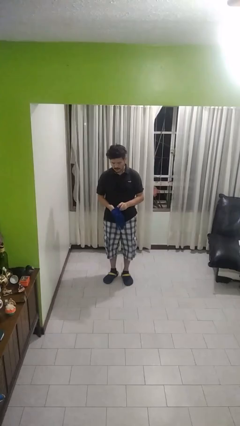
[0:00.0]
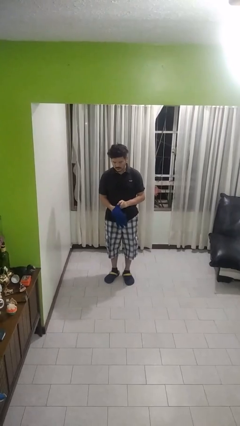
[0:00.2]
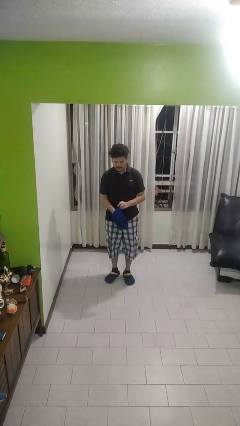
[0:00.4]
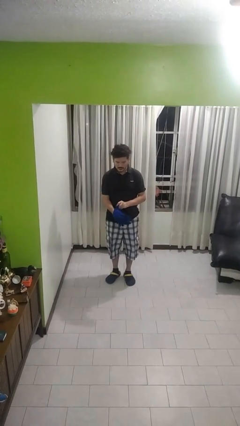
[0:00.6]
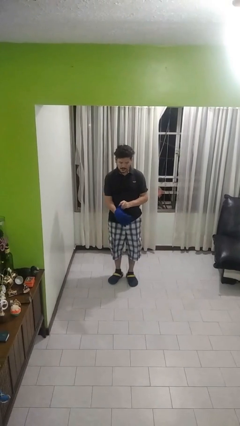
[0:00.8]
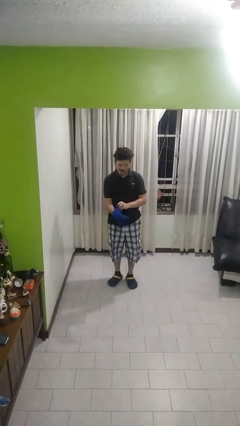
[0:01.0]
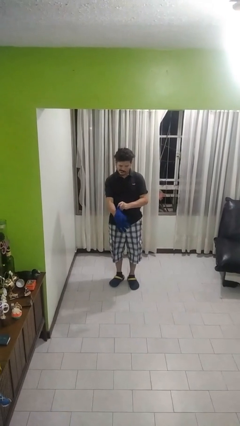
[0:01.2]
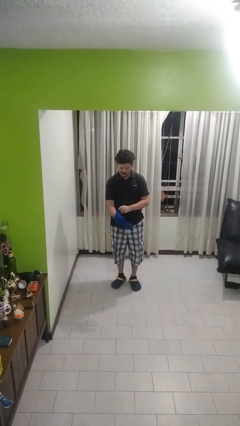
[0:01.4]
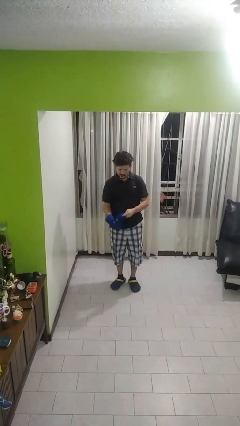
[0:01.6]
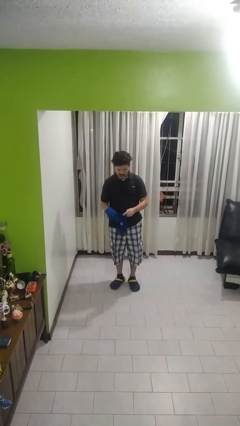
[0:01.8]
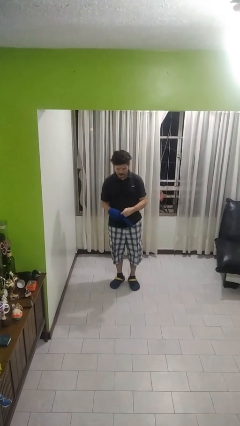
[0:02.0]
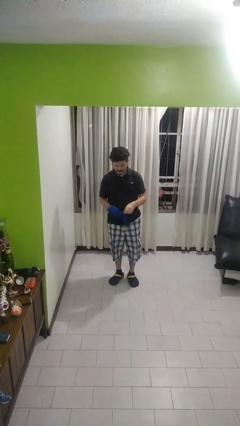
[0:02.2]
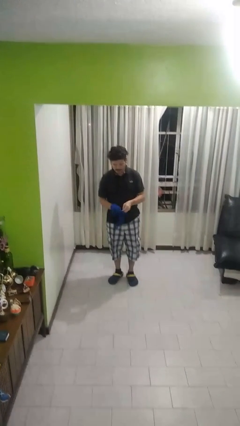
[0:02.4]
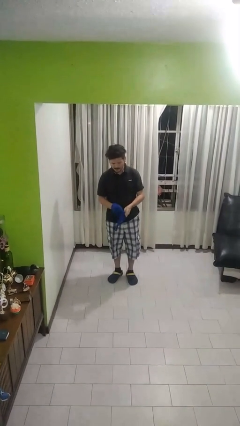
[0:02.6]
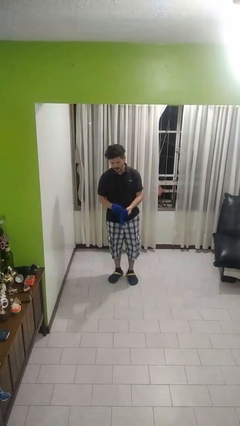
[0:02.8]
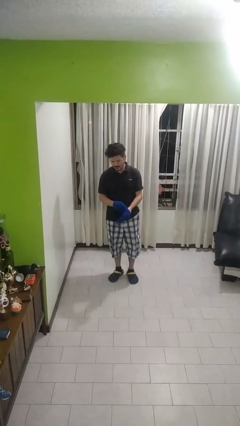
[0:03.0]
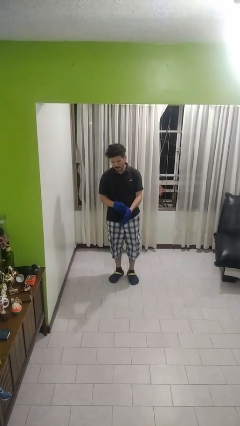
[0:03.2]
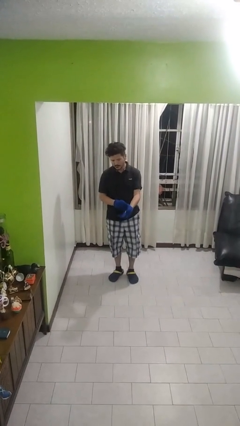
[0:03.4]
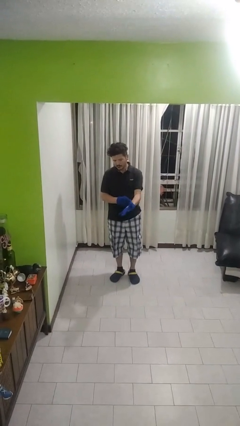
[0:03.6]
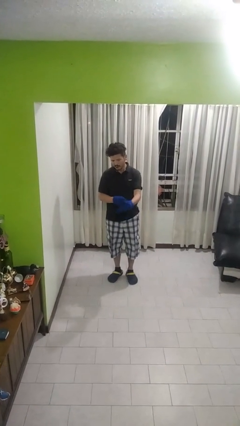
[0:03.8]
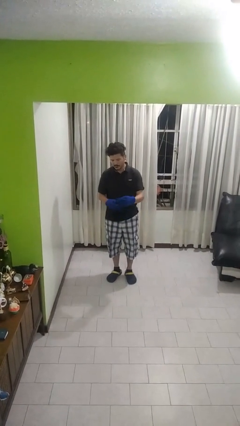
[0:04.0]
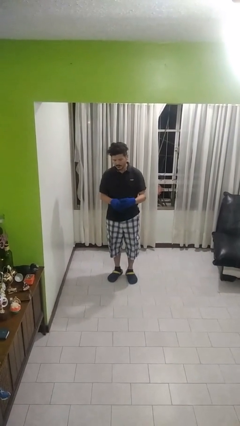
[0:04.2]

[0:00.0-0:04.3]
person puts on gloves

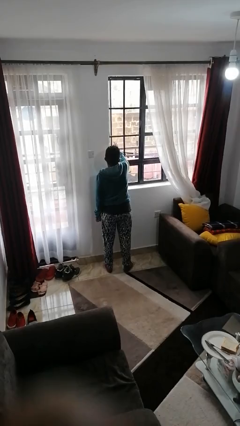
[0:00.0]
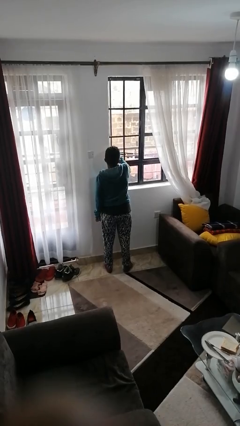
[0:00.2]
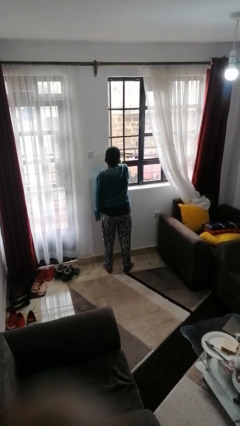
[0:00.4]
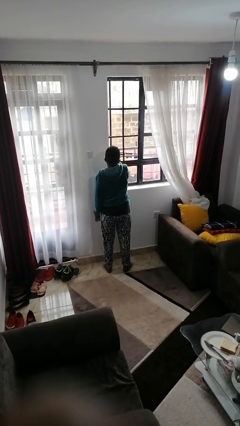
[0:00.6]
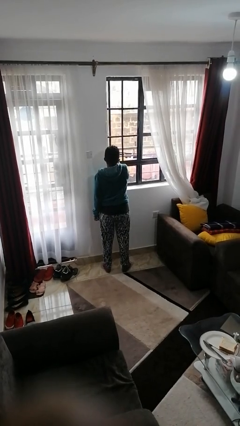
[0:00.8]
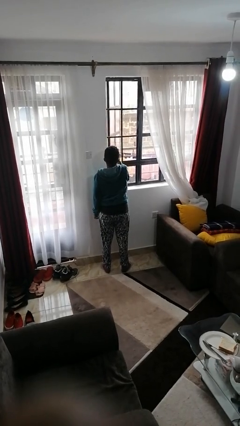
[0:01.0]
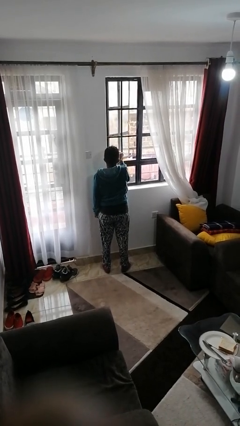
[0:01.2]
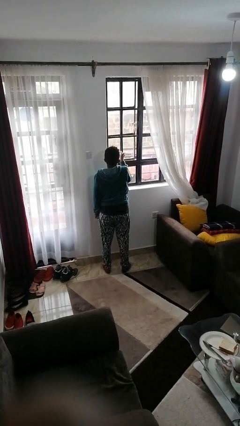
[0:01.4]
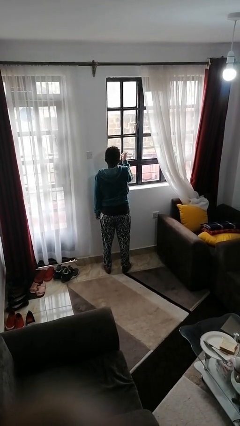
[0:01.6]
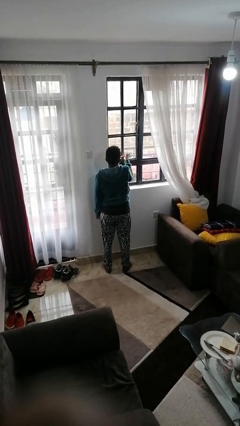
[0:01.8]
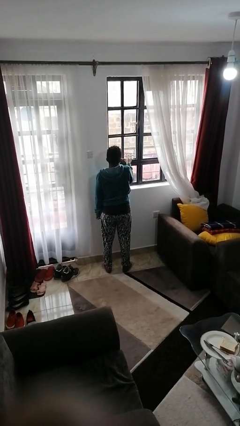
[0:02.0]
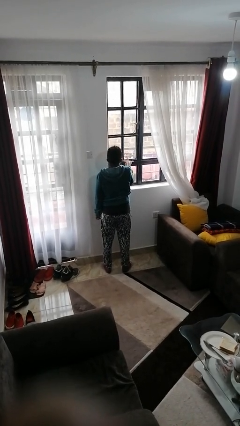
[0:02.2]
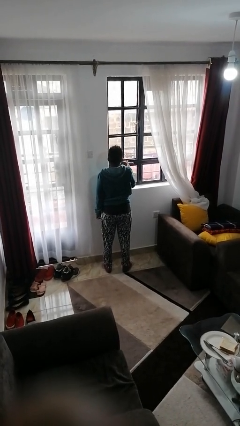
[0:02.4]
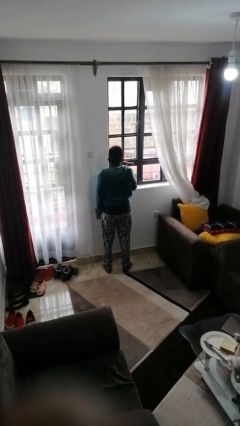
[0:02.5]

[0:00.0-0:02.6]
person closes home window

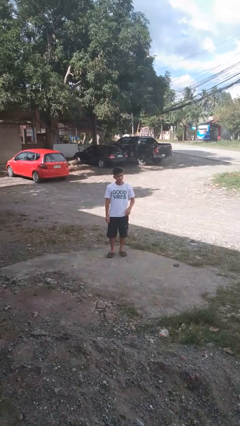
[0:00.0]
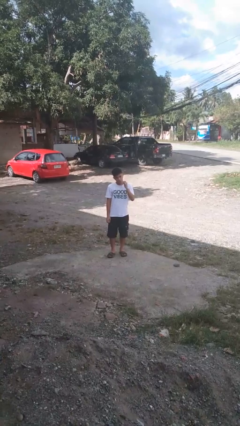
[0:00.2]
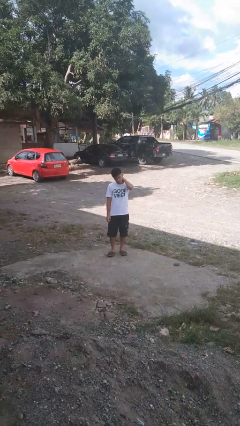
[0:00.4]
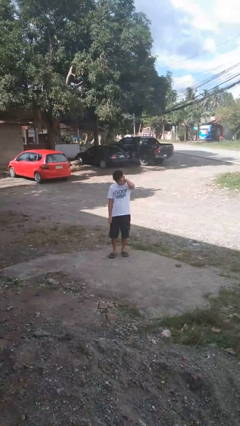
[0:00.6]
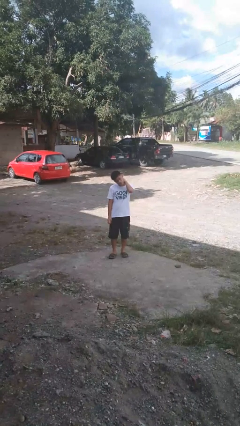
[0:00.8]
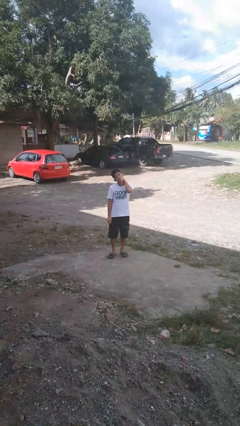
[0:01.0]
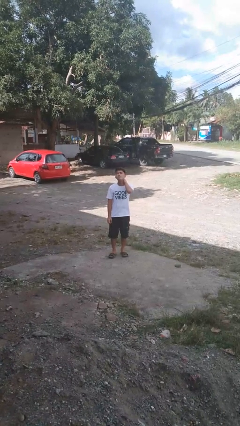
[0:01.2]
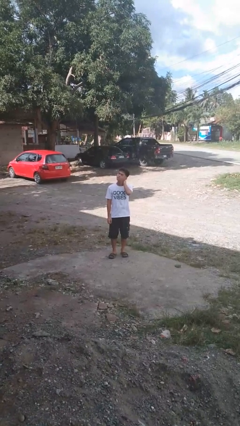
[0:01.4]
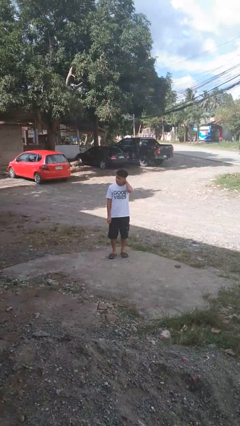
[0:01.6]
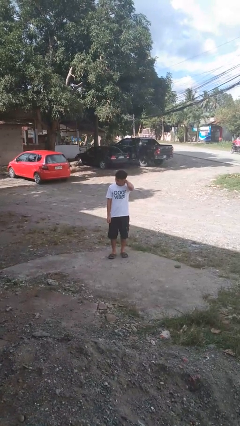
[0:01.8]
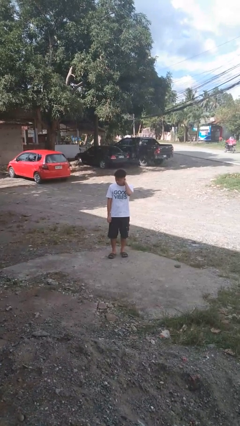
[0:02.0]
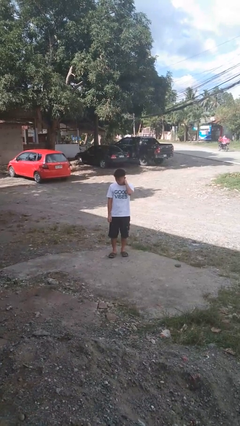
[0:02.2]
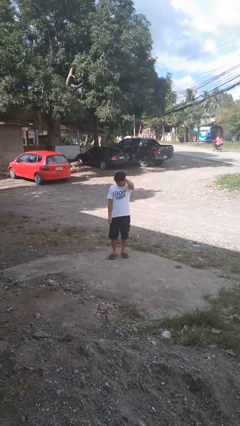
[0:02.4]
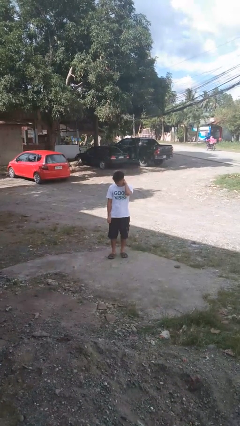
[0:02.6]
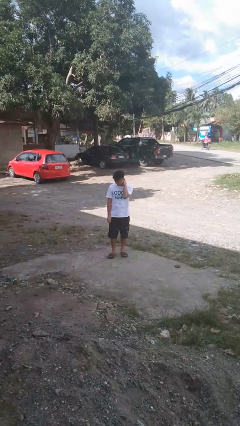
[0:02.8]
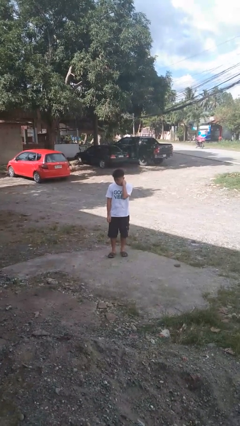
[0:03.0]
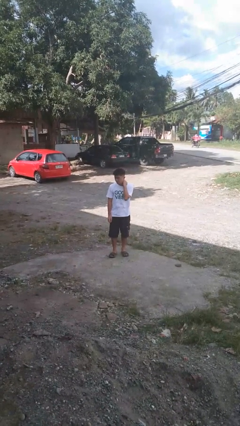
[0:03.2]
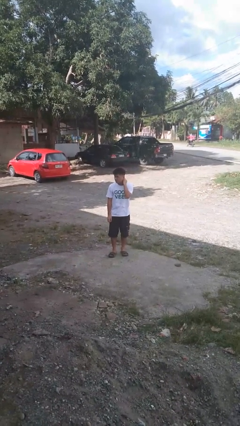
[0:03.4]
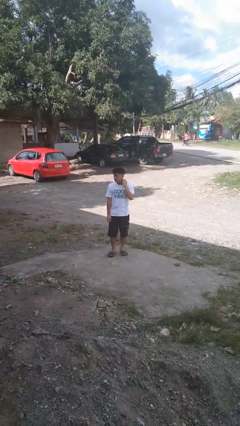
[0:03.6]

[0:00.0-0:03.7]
person rubs neck

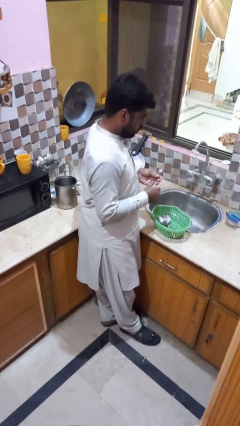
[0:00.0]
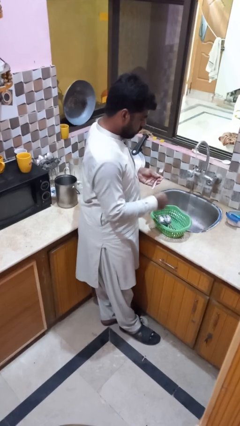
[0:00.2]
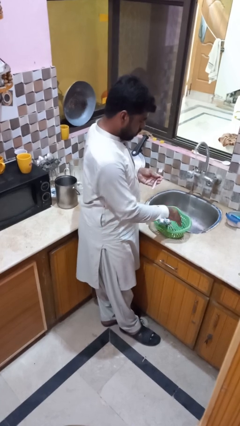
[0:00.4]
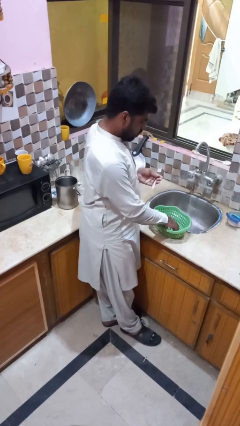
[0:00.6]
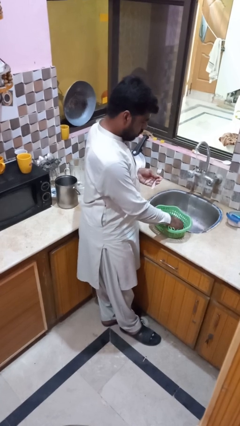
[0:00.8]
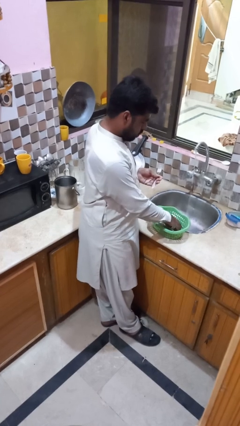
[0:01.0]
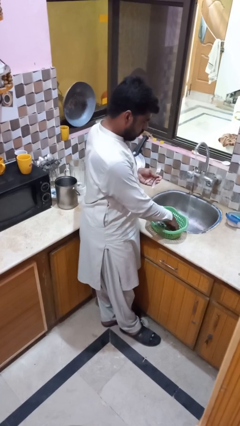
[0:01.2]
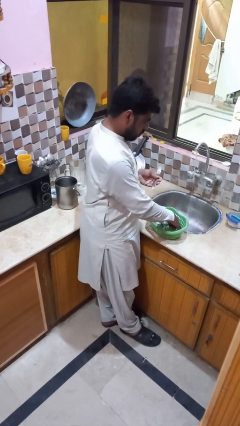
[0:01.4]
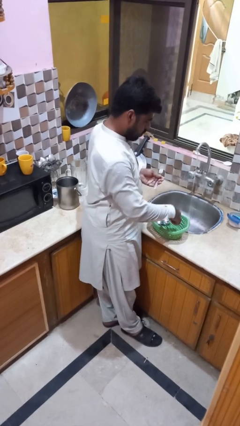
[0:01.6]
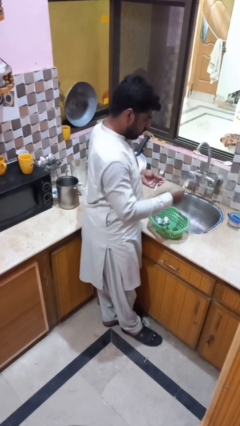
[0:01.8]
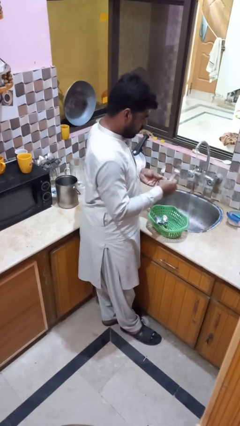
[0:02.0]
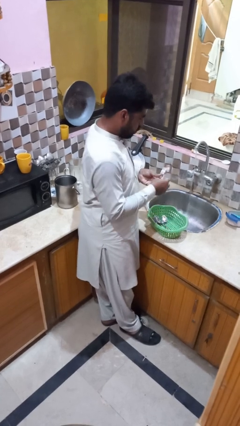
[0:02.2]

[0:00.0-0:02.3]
person unloads dishwasher

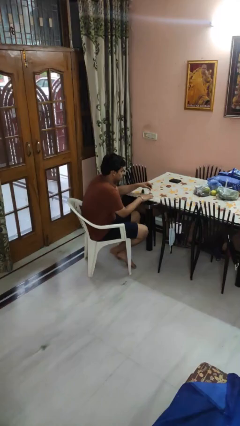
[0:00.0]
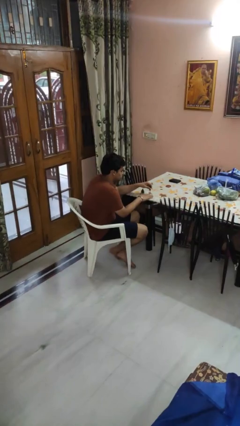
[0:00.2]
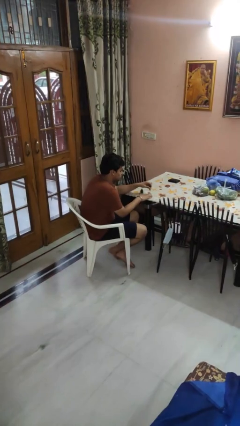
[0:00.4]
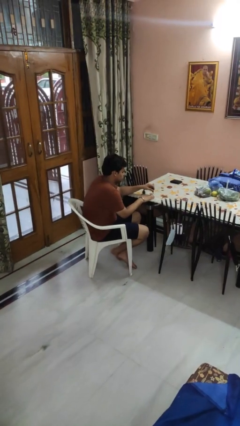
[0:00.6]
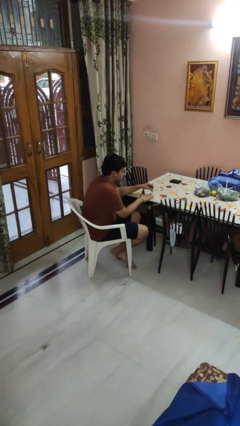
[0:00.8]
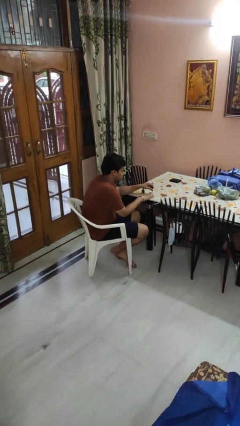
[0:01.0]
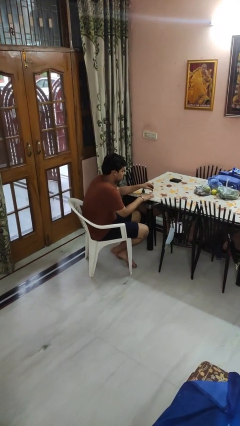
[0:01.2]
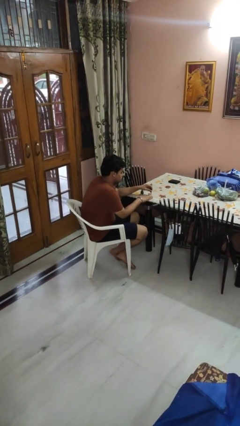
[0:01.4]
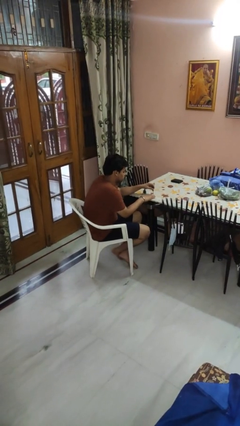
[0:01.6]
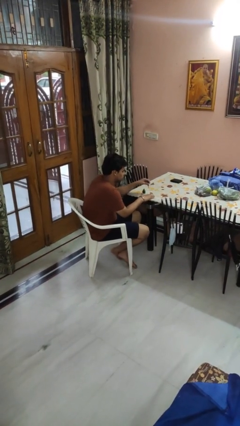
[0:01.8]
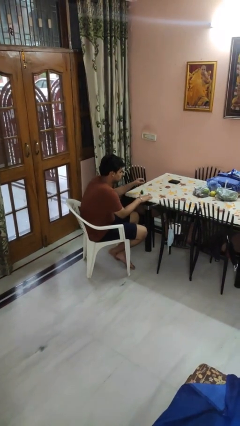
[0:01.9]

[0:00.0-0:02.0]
person paints fingernails

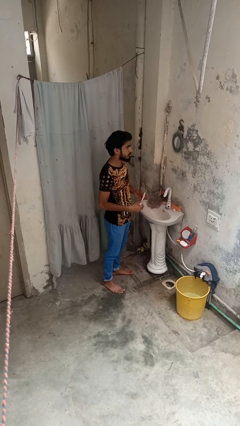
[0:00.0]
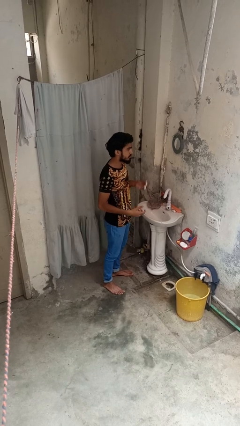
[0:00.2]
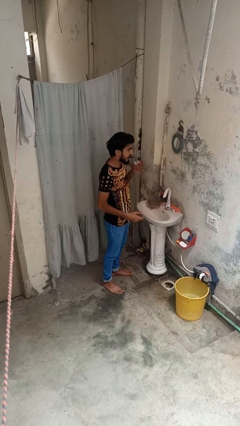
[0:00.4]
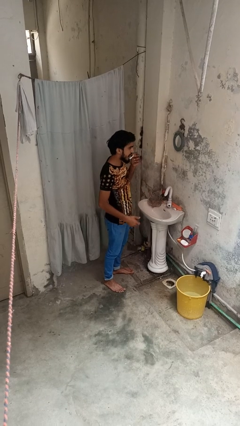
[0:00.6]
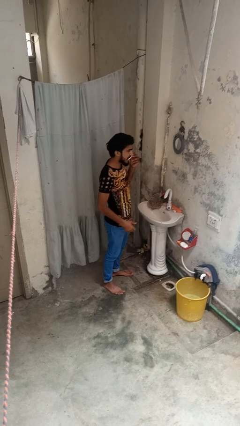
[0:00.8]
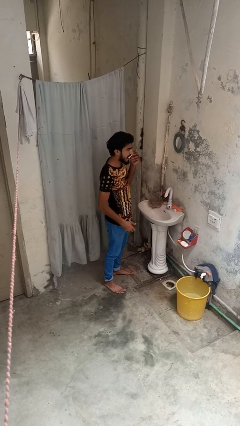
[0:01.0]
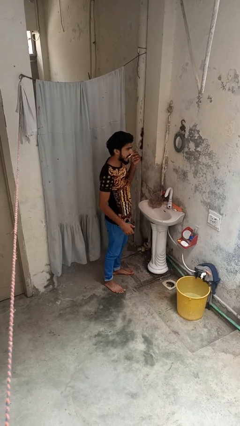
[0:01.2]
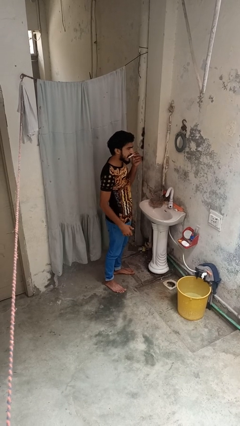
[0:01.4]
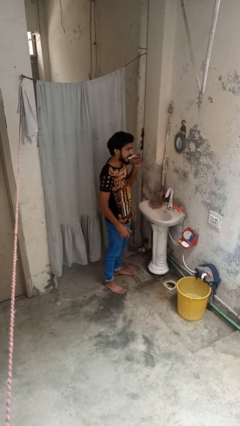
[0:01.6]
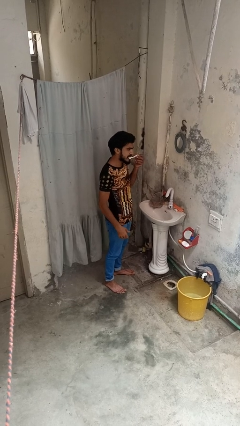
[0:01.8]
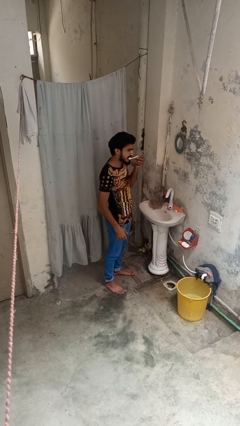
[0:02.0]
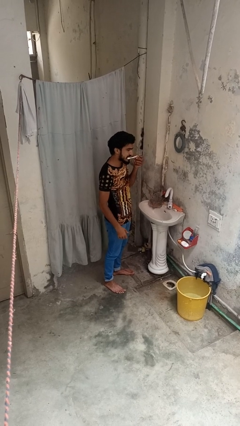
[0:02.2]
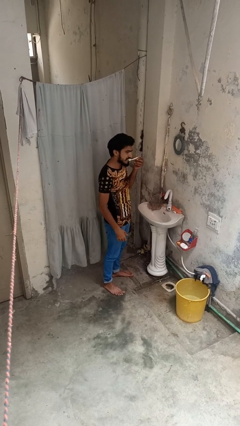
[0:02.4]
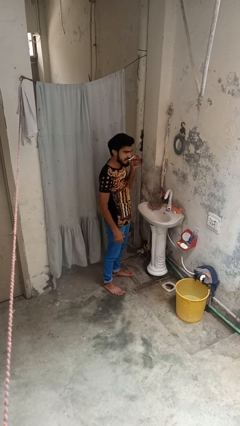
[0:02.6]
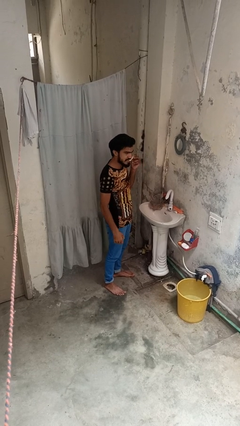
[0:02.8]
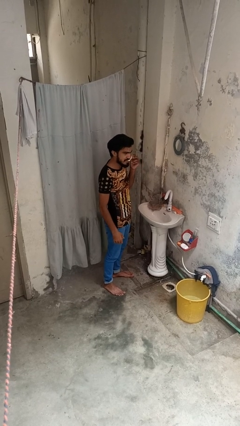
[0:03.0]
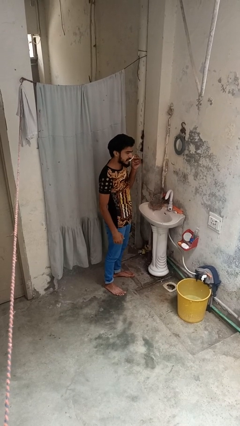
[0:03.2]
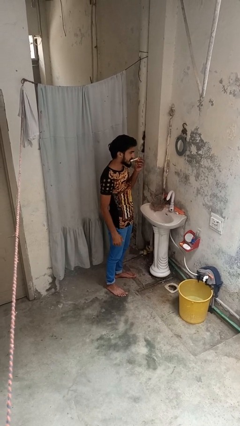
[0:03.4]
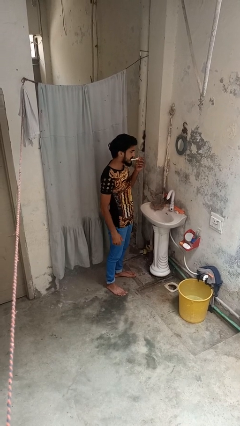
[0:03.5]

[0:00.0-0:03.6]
person brushes teeth
